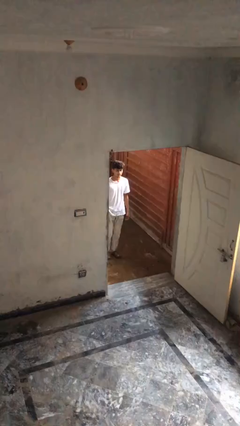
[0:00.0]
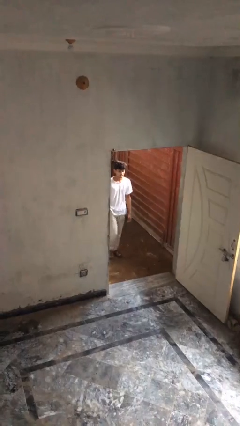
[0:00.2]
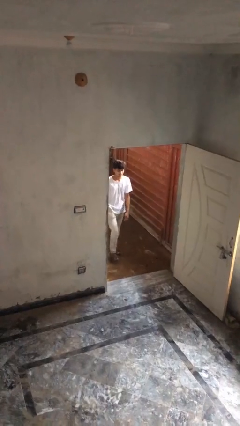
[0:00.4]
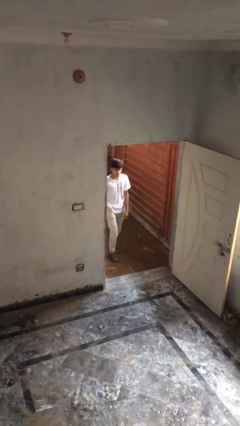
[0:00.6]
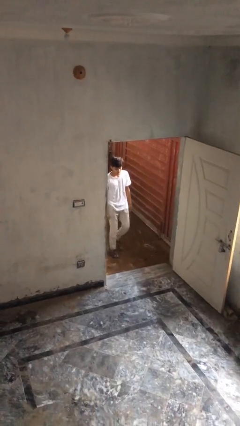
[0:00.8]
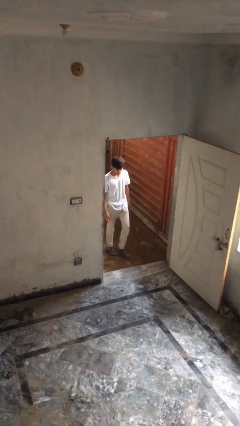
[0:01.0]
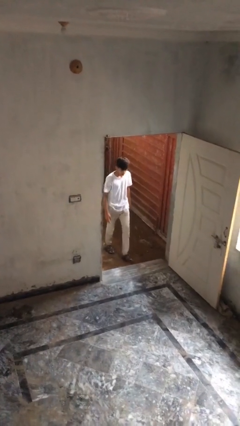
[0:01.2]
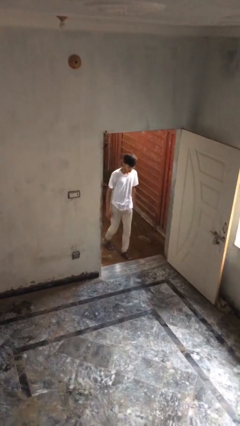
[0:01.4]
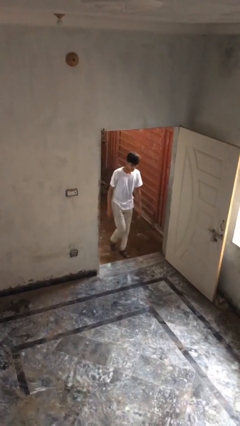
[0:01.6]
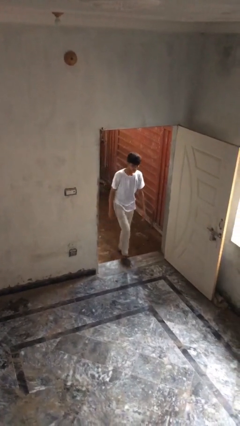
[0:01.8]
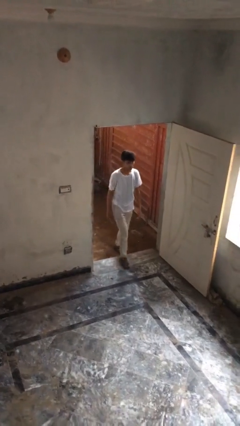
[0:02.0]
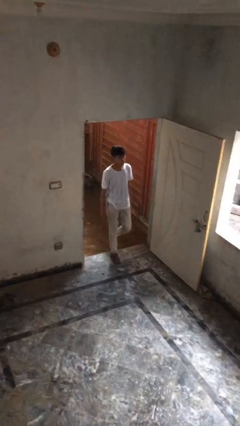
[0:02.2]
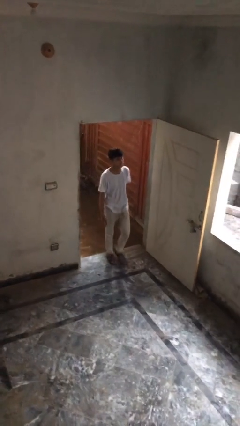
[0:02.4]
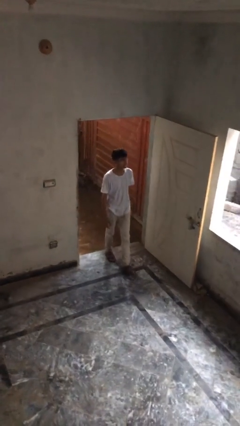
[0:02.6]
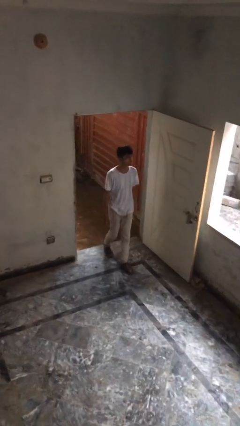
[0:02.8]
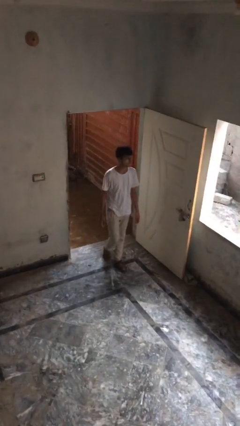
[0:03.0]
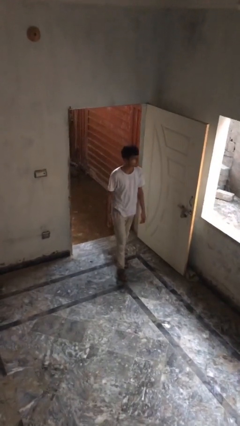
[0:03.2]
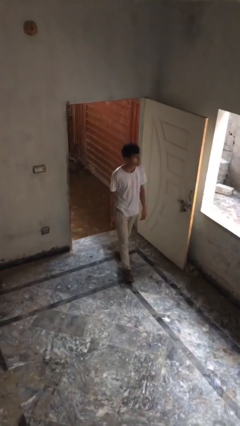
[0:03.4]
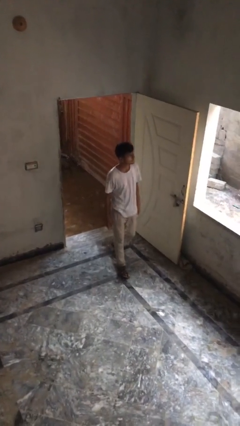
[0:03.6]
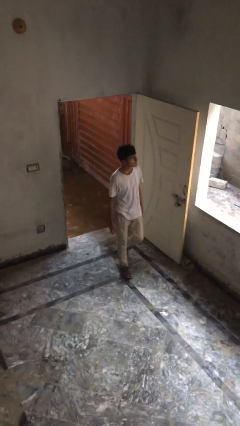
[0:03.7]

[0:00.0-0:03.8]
person enters scene through structure

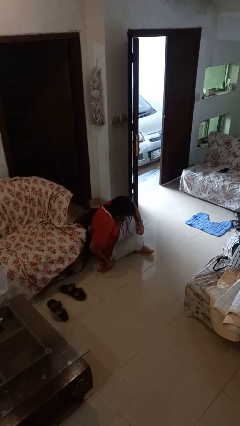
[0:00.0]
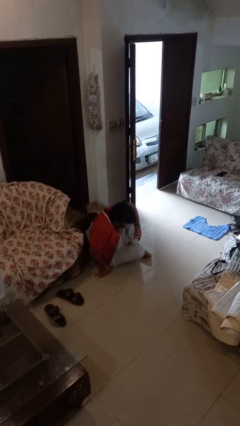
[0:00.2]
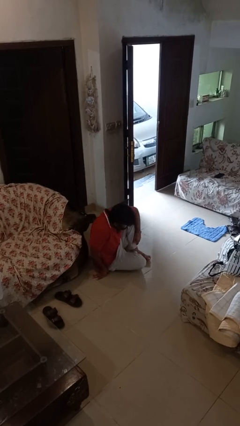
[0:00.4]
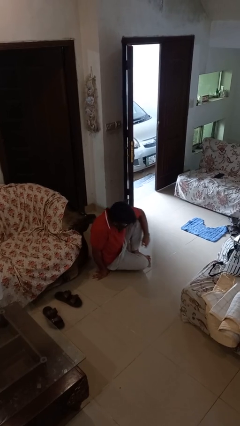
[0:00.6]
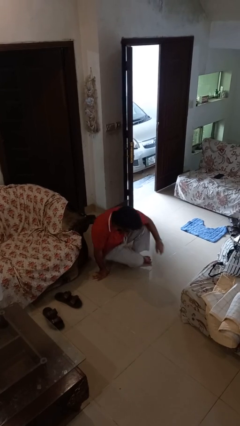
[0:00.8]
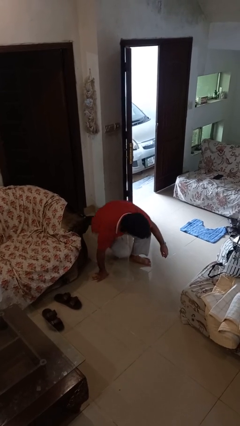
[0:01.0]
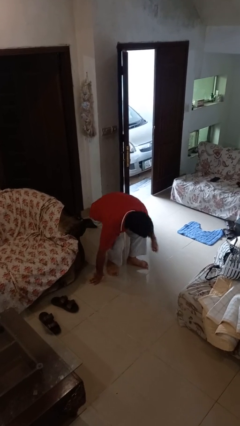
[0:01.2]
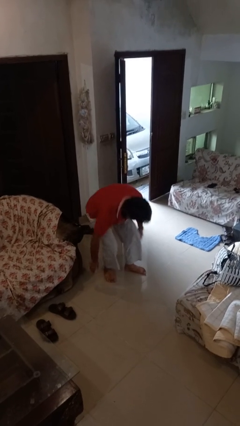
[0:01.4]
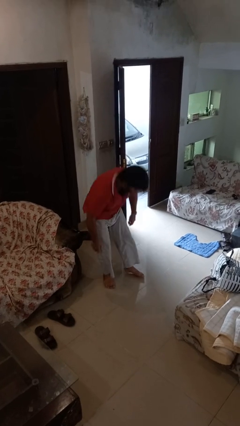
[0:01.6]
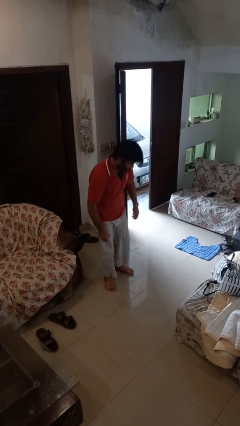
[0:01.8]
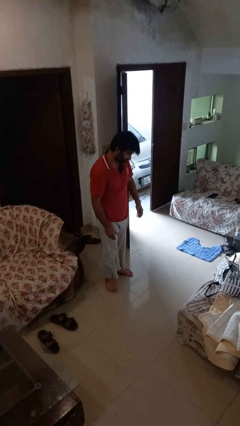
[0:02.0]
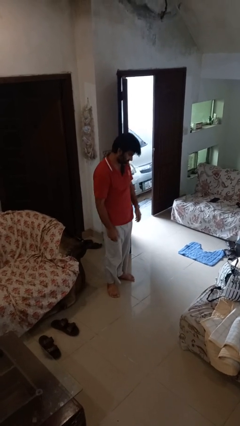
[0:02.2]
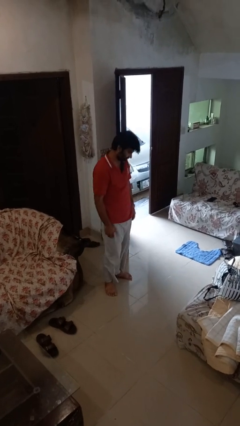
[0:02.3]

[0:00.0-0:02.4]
person stands up from floor

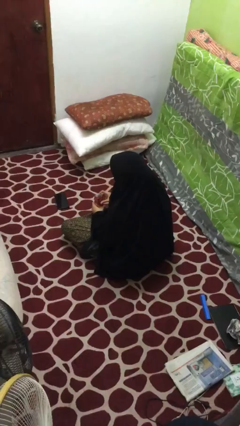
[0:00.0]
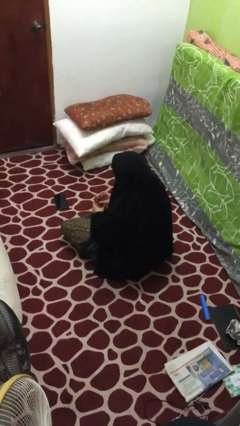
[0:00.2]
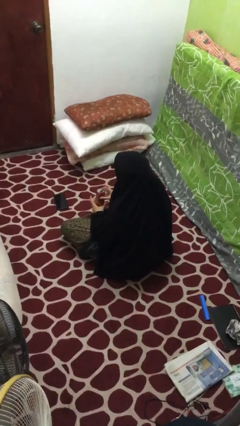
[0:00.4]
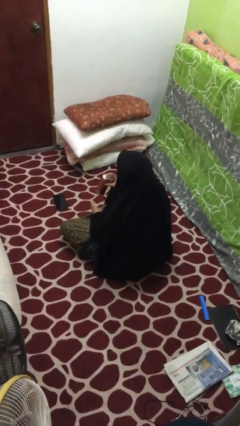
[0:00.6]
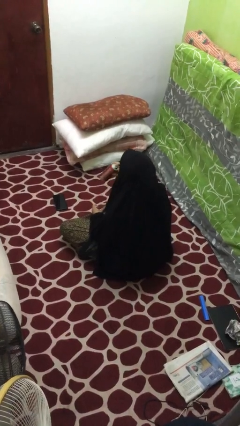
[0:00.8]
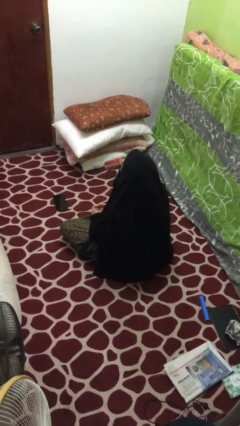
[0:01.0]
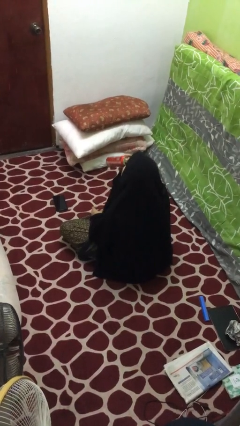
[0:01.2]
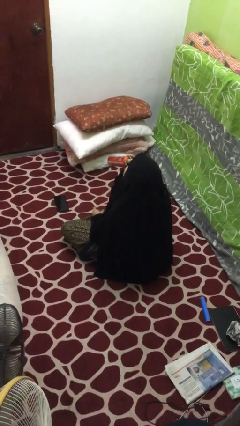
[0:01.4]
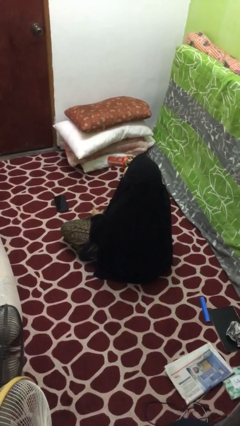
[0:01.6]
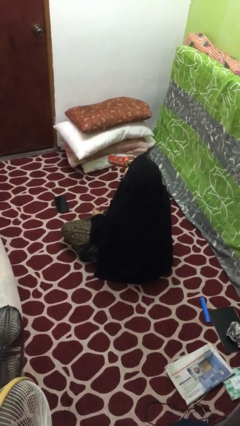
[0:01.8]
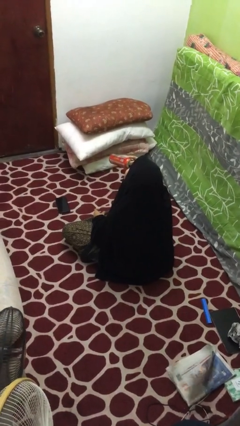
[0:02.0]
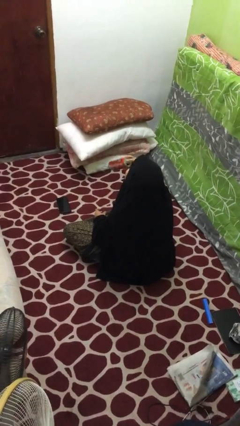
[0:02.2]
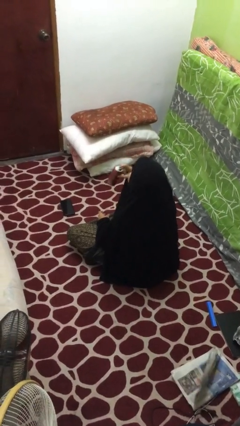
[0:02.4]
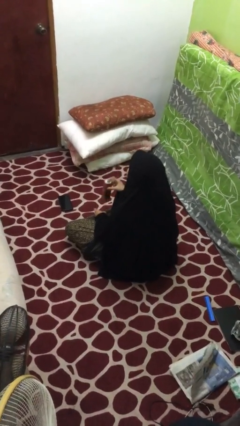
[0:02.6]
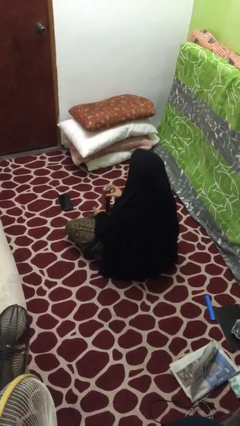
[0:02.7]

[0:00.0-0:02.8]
person drinks from beverage can

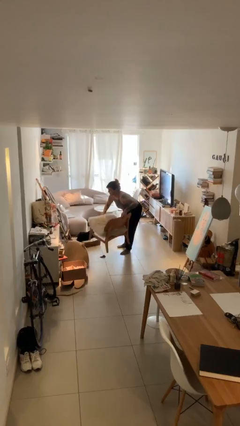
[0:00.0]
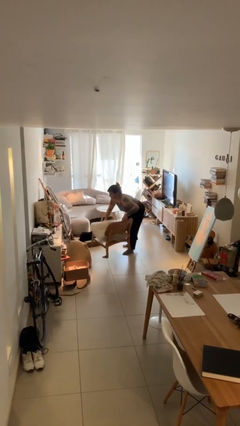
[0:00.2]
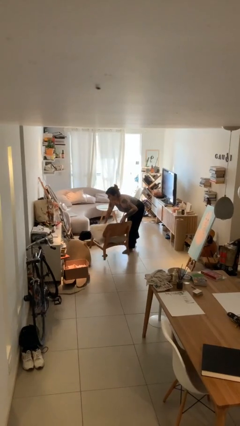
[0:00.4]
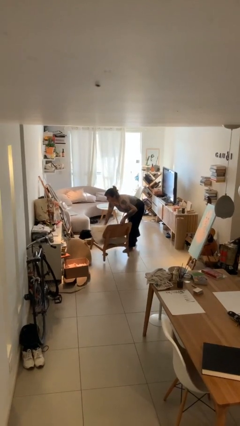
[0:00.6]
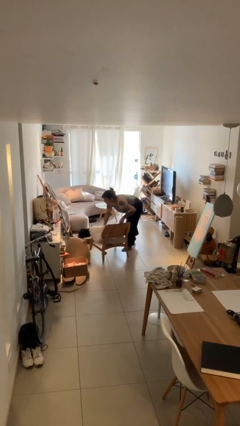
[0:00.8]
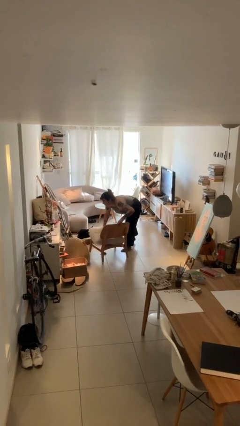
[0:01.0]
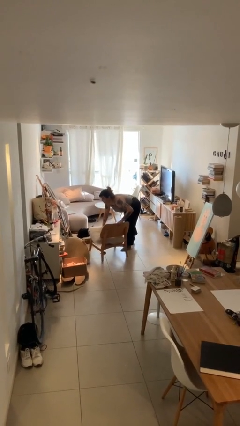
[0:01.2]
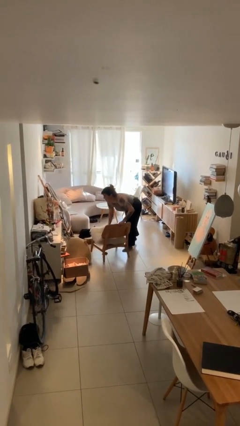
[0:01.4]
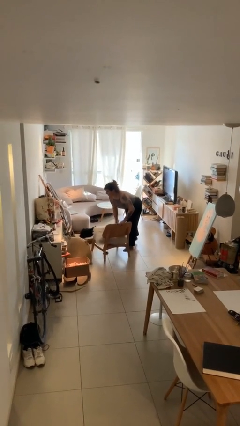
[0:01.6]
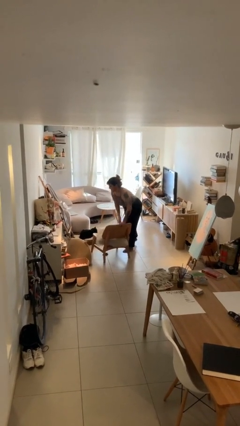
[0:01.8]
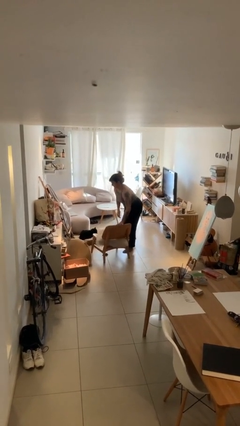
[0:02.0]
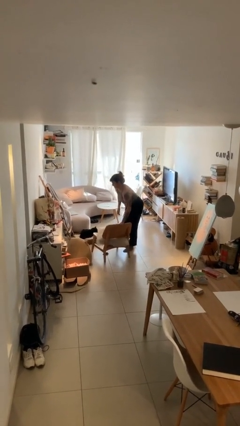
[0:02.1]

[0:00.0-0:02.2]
person puts down object on floor

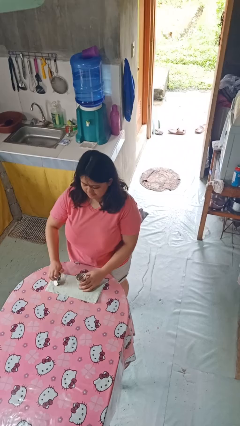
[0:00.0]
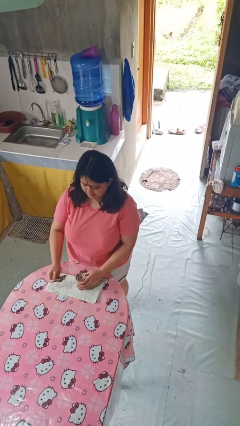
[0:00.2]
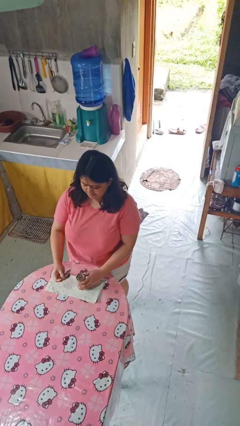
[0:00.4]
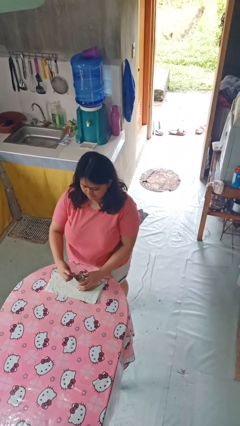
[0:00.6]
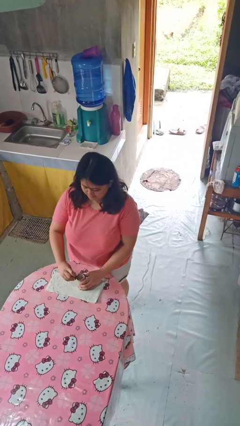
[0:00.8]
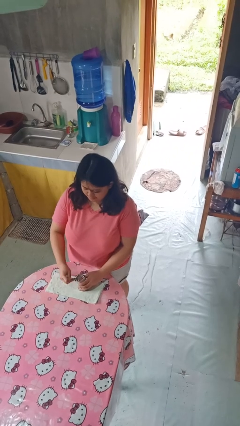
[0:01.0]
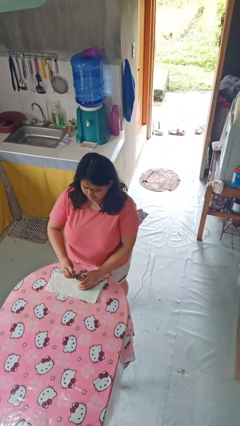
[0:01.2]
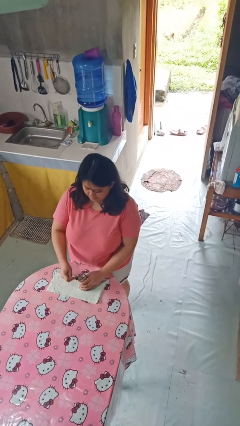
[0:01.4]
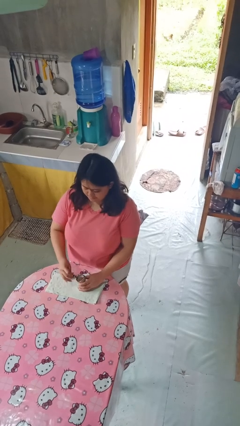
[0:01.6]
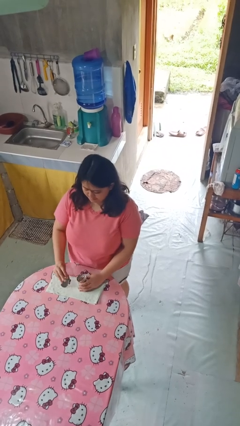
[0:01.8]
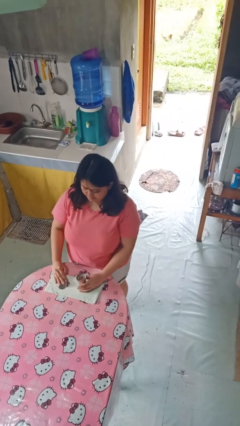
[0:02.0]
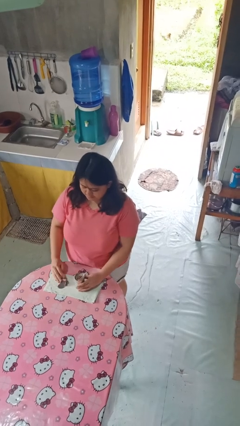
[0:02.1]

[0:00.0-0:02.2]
person opens can with can opener

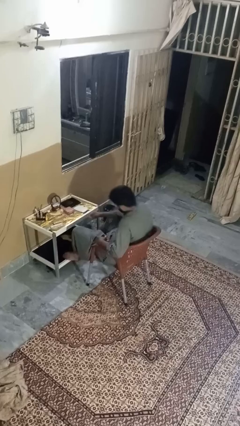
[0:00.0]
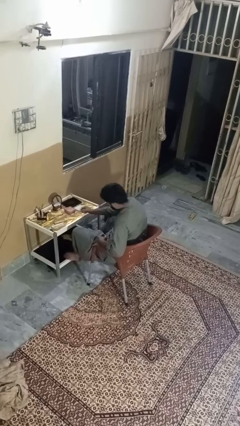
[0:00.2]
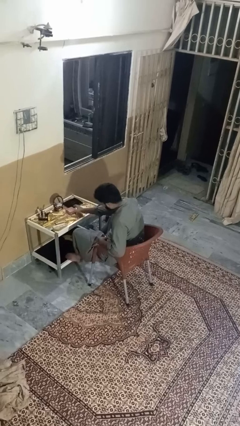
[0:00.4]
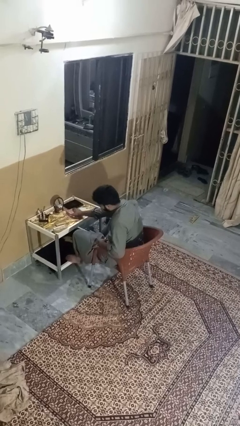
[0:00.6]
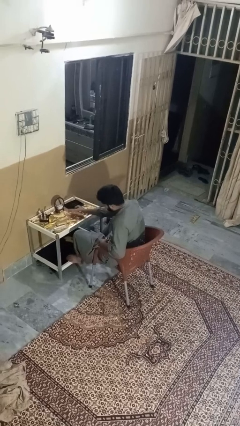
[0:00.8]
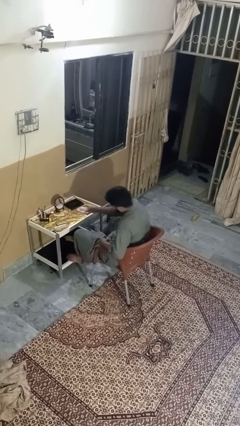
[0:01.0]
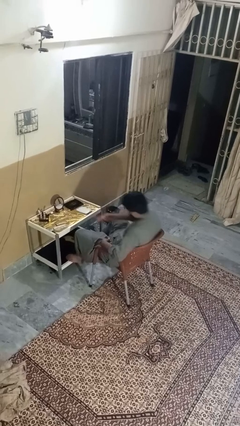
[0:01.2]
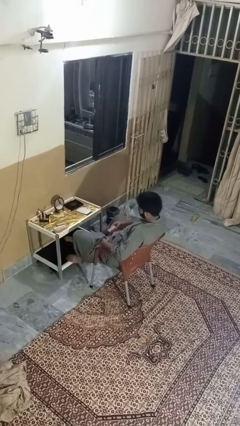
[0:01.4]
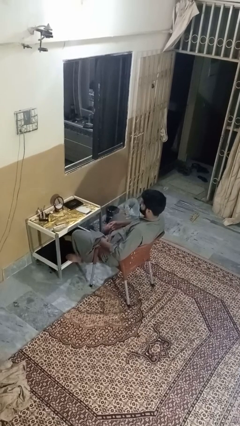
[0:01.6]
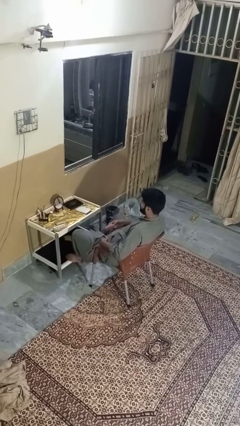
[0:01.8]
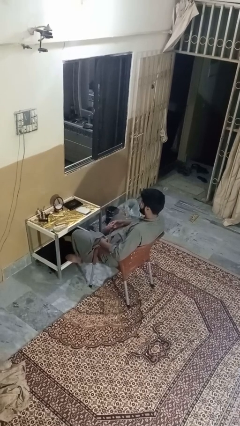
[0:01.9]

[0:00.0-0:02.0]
person picks up object from table

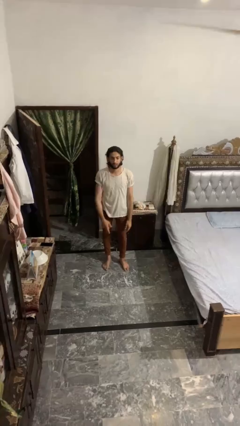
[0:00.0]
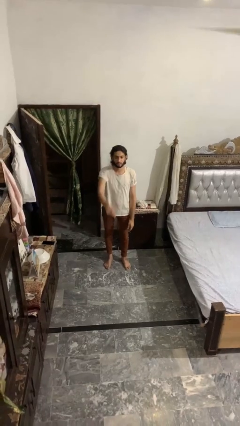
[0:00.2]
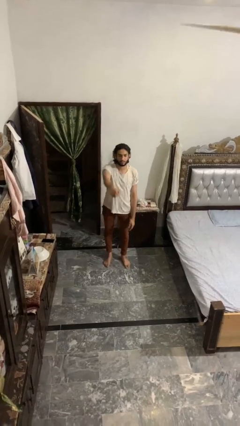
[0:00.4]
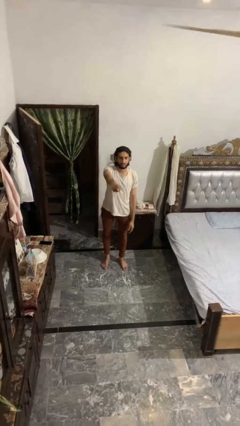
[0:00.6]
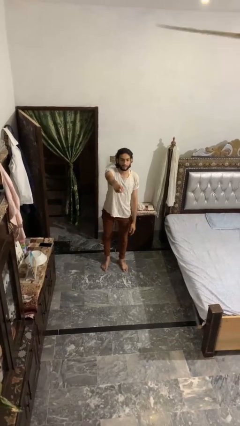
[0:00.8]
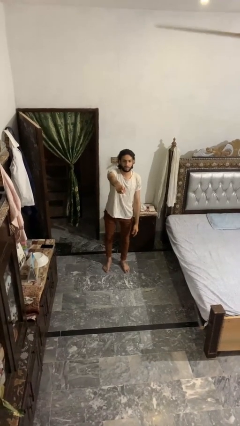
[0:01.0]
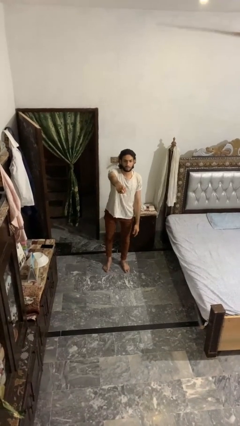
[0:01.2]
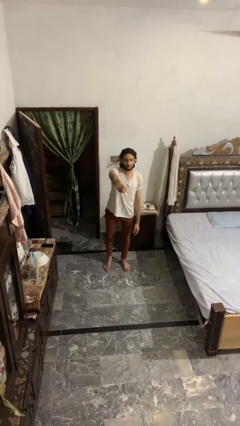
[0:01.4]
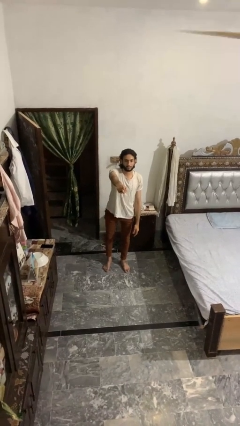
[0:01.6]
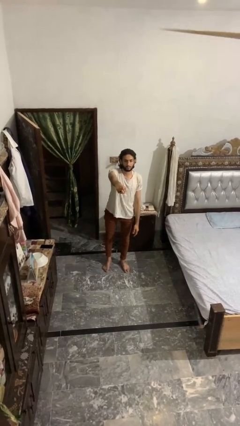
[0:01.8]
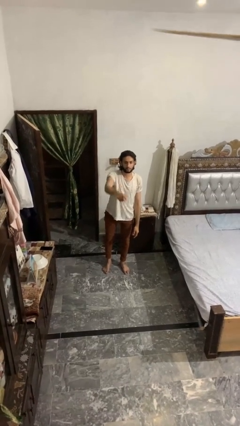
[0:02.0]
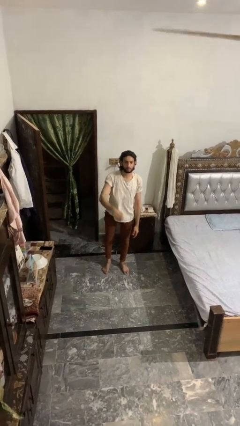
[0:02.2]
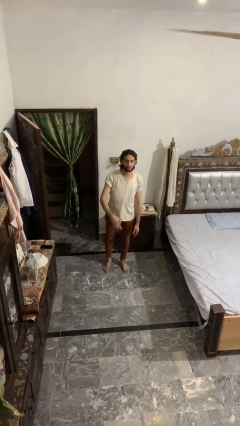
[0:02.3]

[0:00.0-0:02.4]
person points at person
